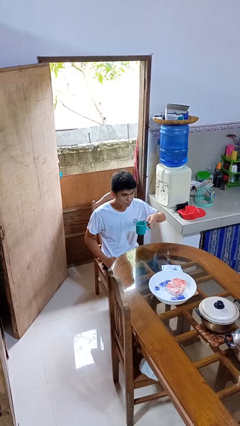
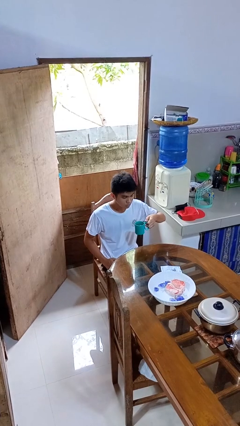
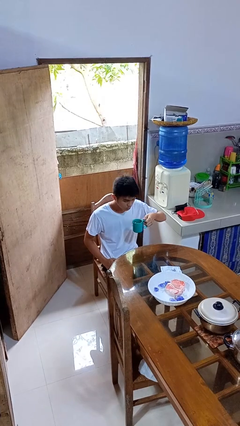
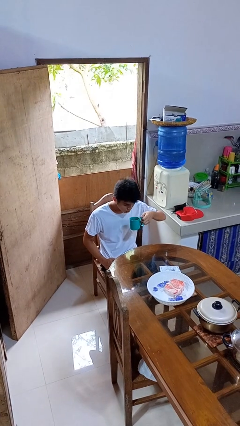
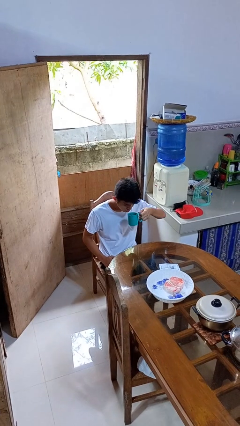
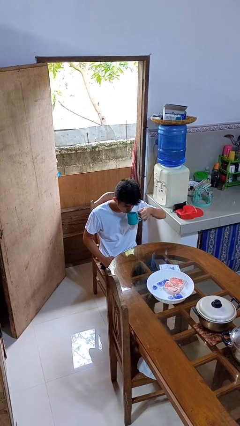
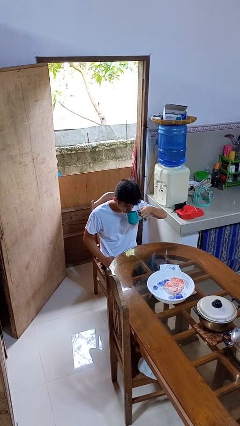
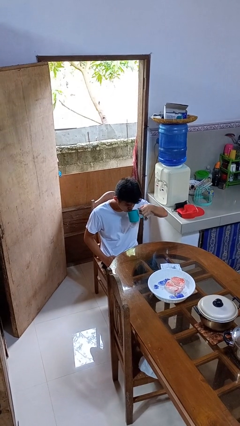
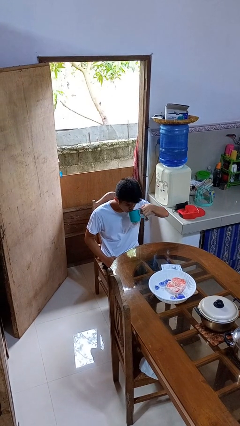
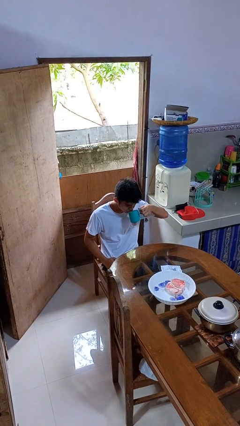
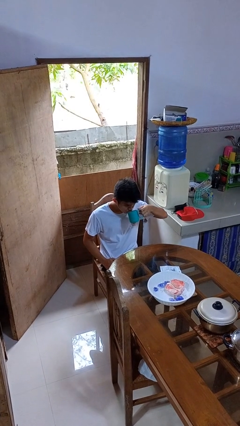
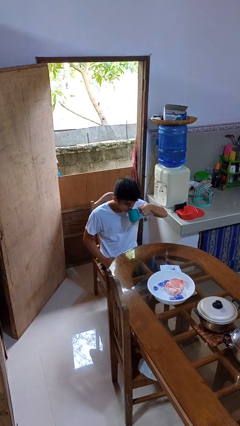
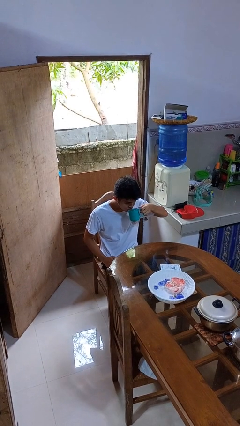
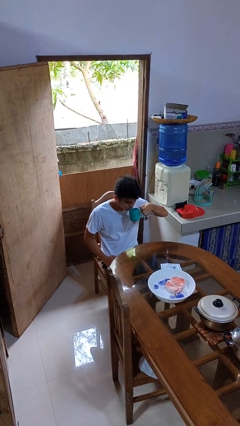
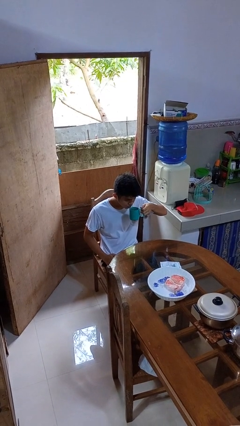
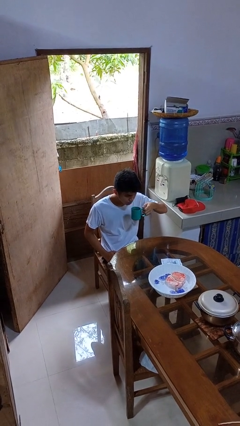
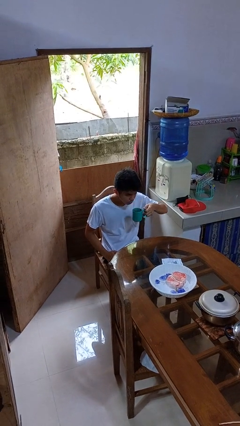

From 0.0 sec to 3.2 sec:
person drinks from mug

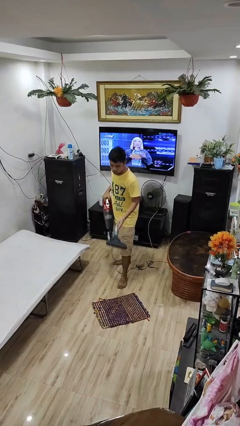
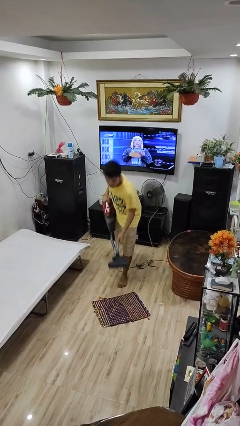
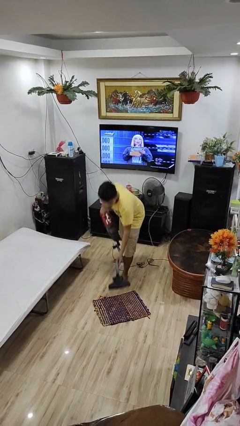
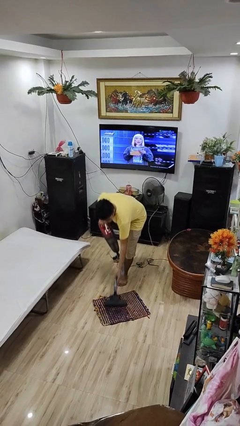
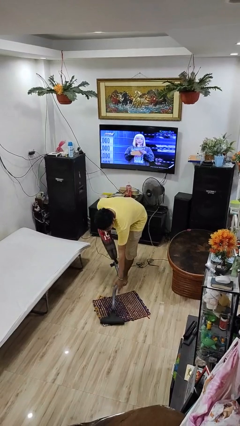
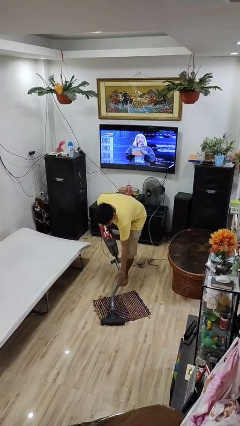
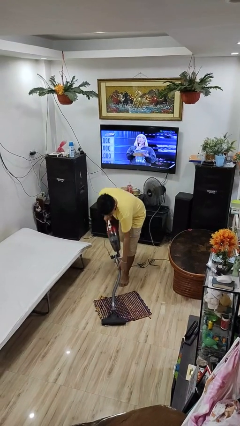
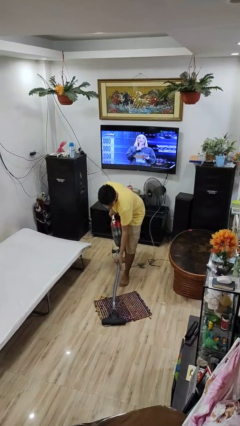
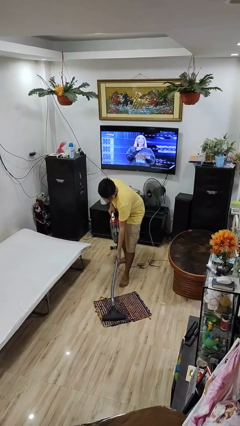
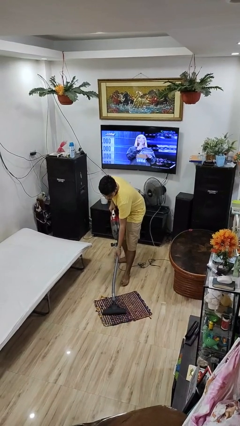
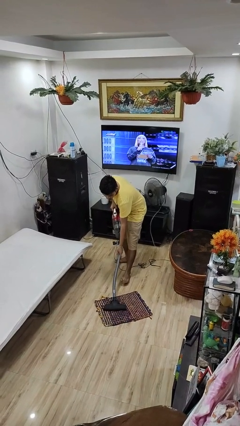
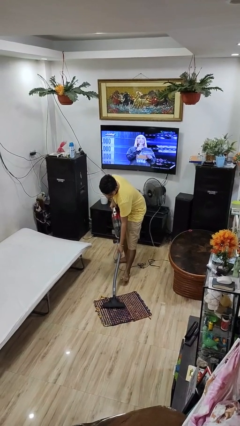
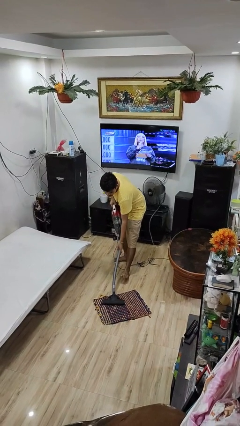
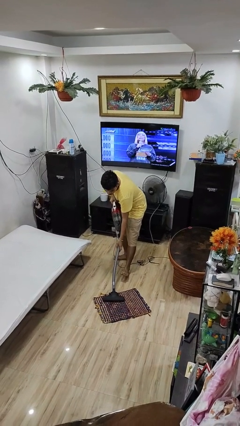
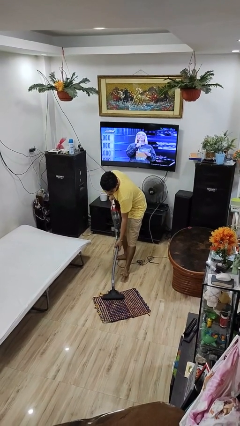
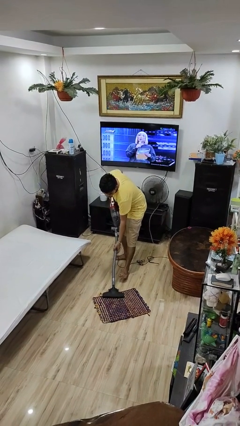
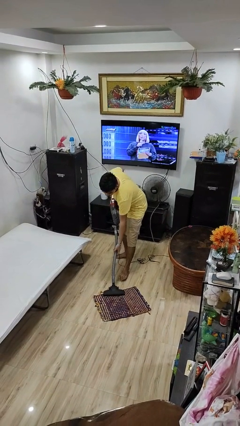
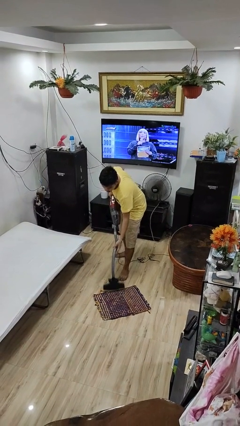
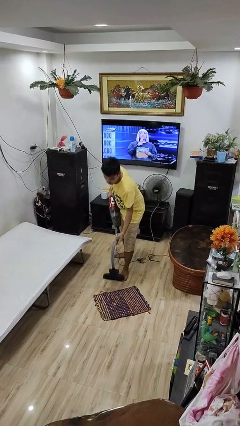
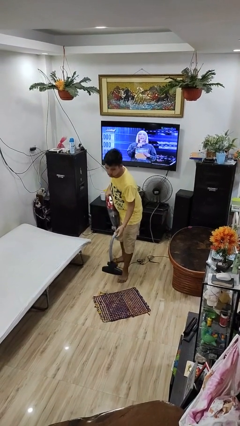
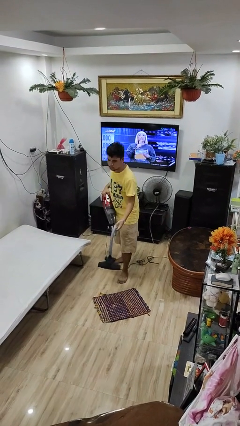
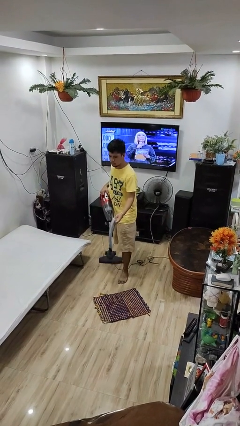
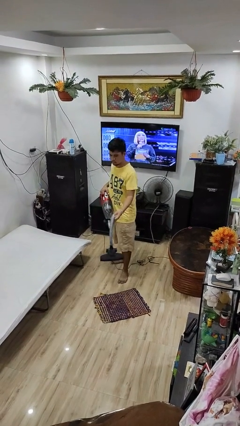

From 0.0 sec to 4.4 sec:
person vacuums carpet

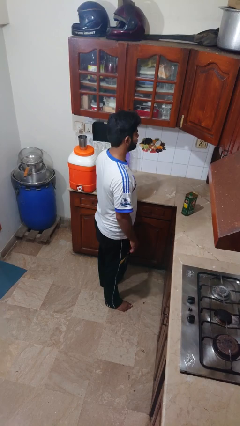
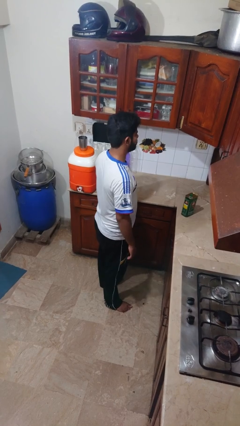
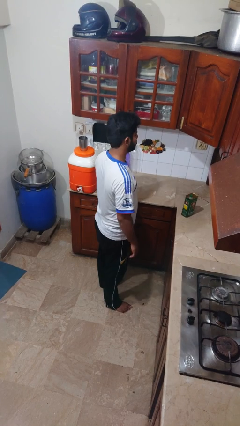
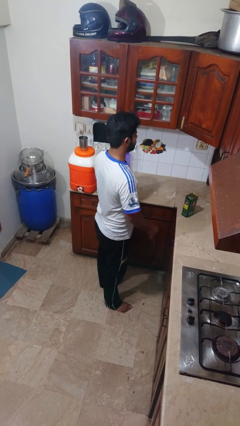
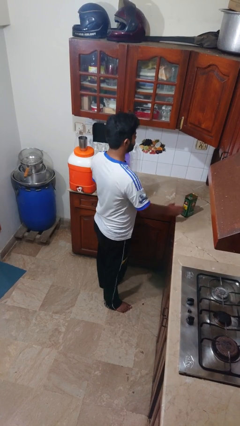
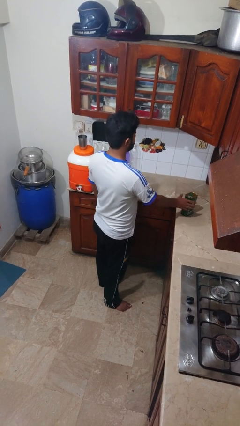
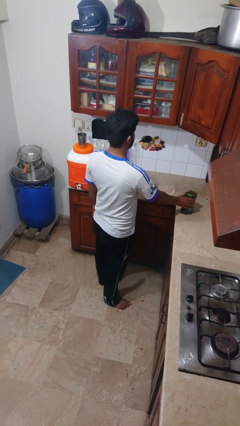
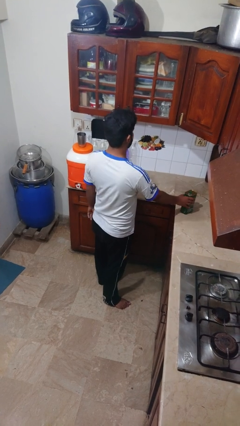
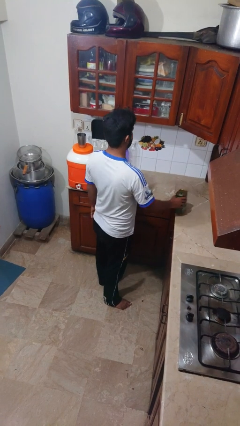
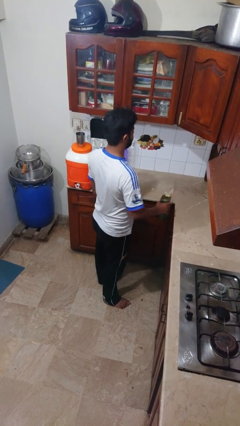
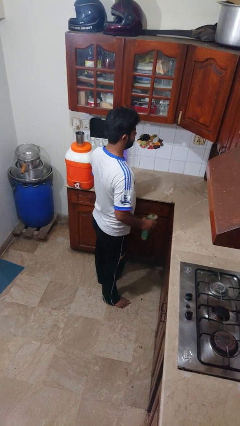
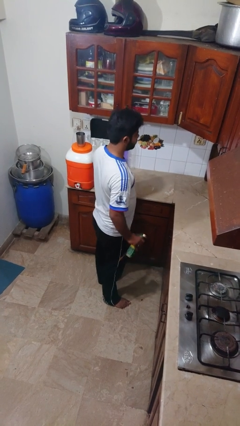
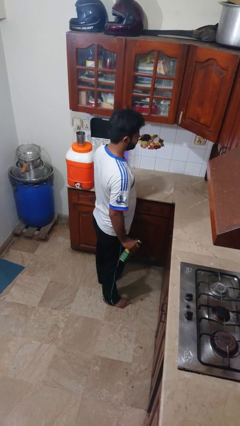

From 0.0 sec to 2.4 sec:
person picks up object from countertop

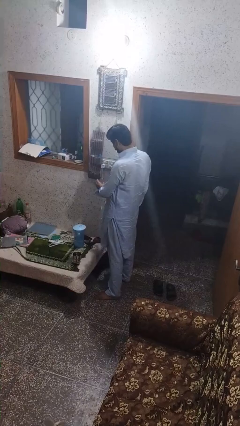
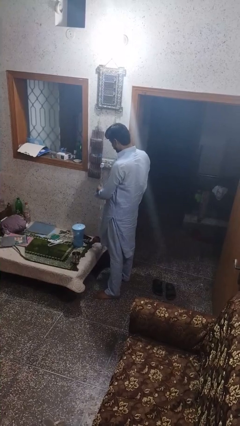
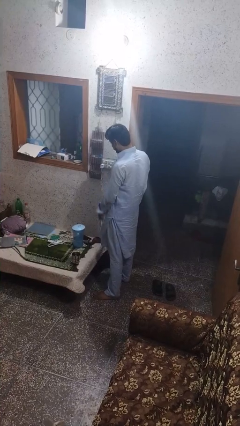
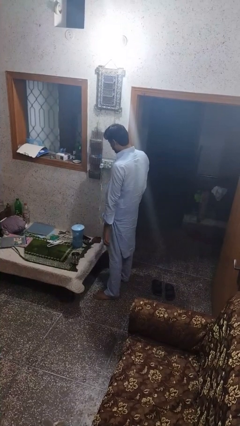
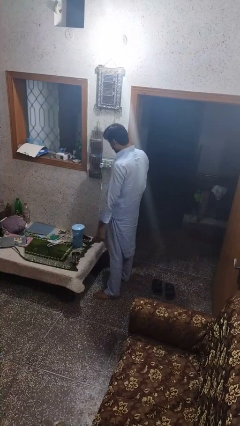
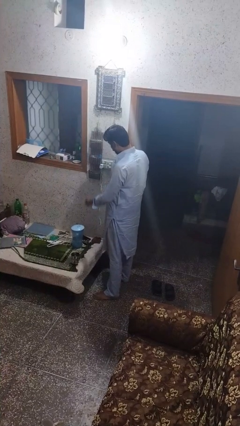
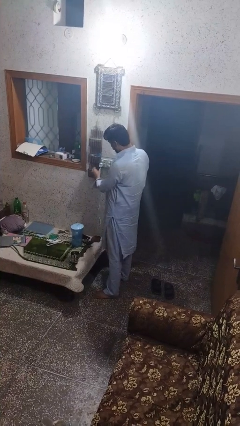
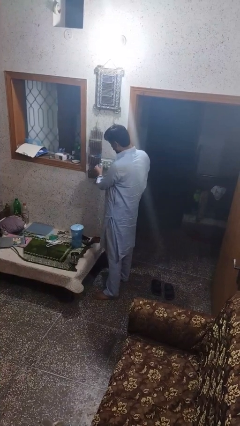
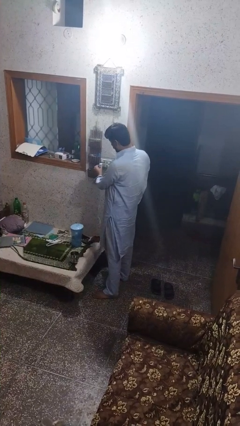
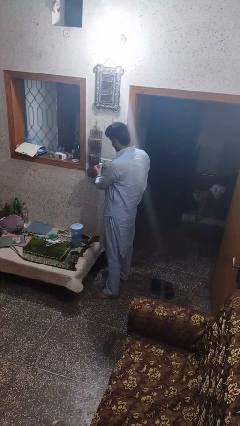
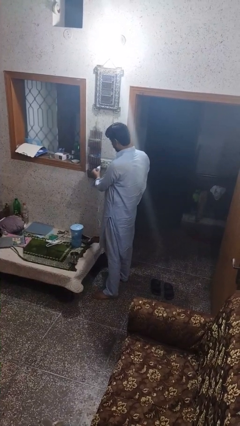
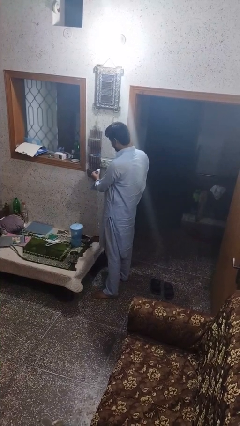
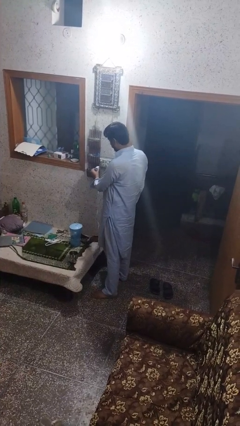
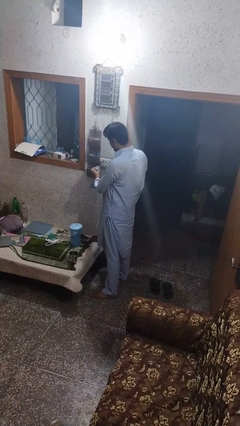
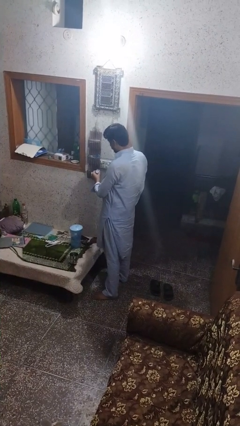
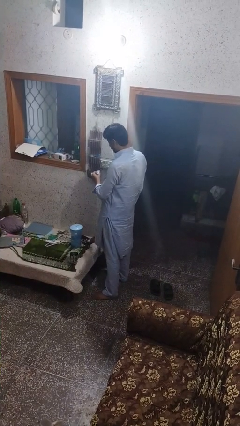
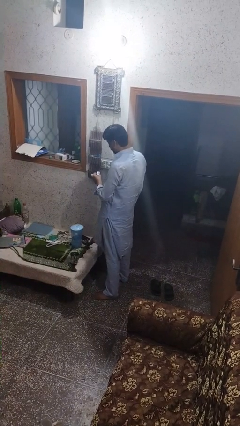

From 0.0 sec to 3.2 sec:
person unplugs from electrical socket

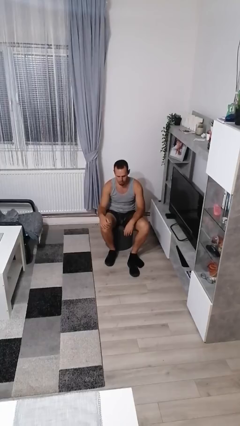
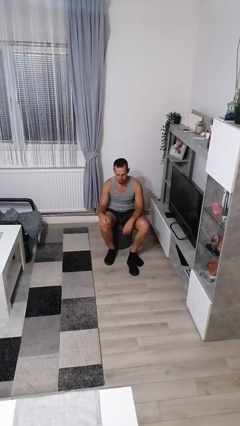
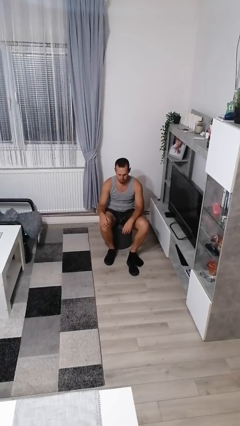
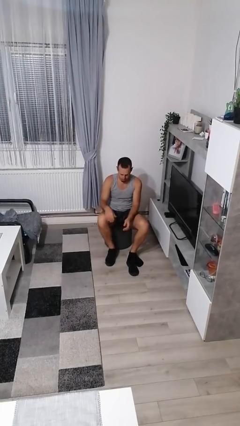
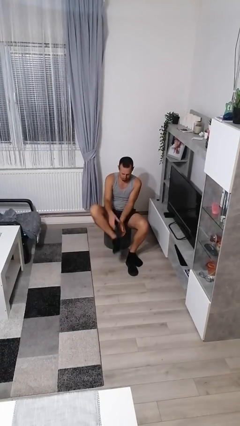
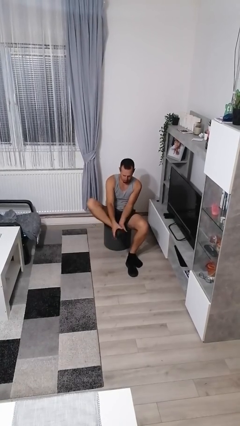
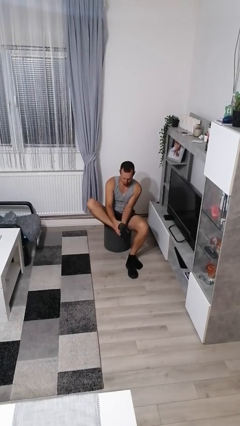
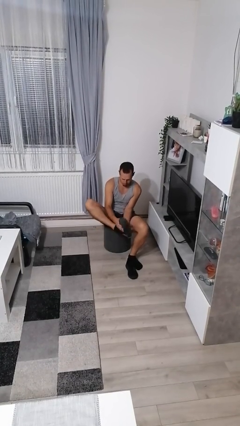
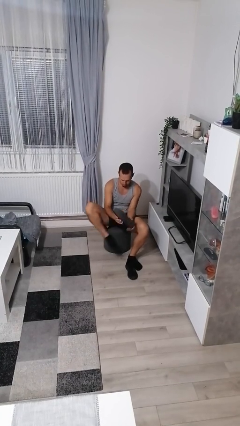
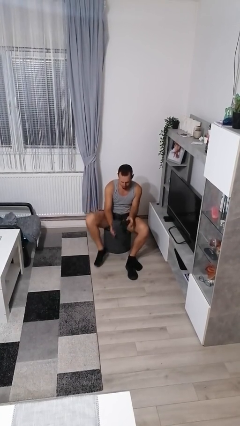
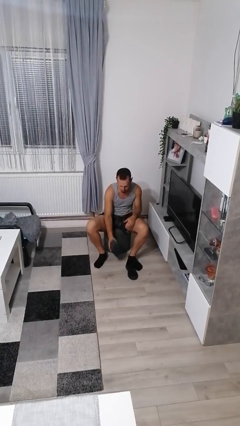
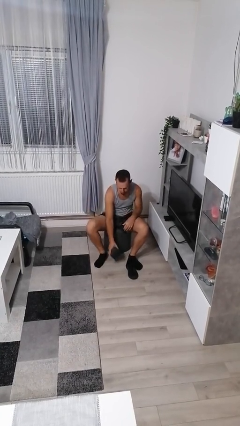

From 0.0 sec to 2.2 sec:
person takes off shoes

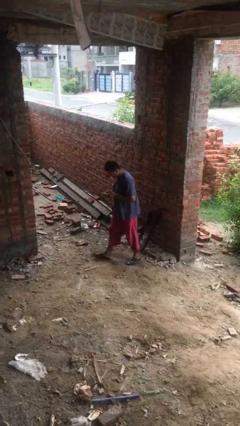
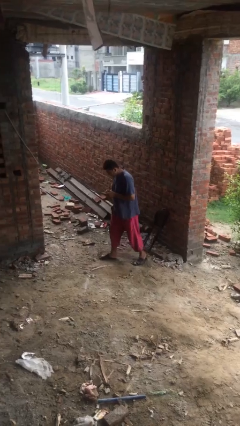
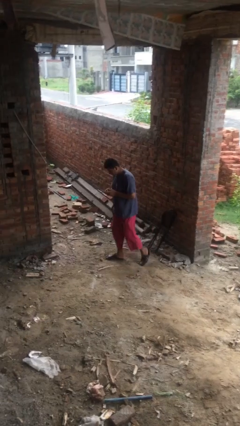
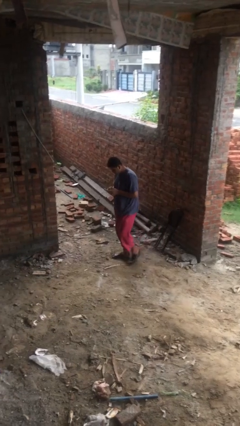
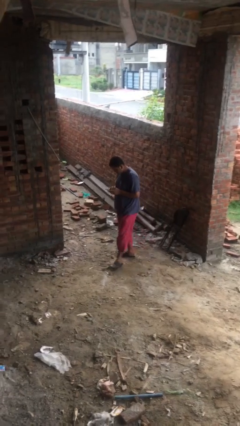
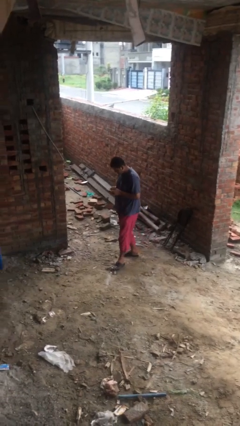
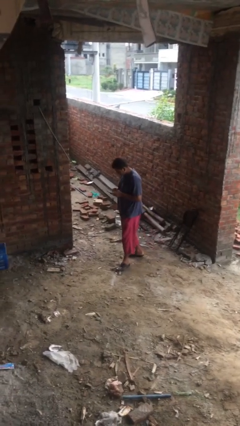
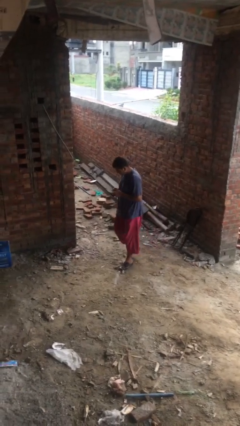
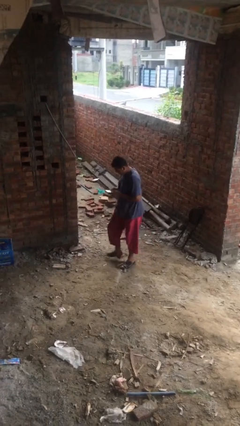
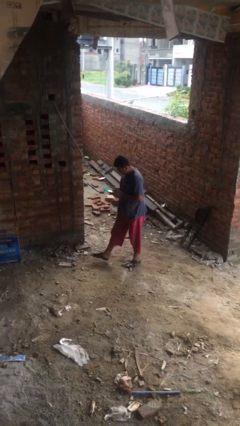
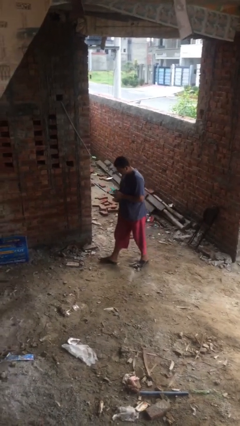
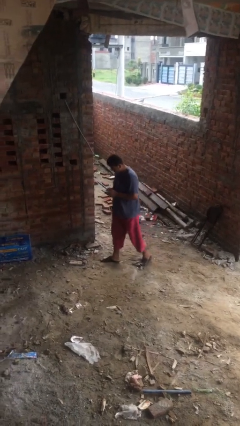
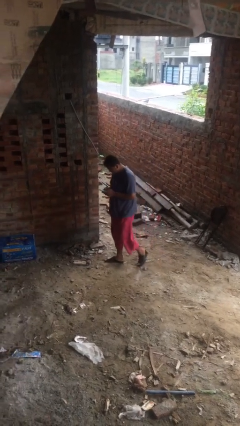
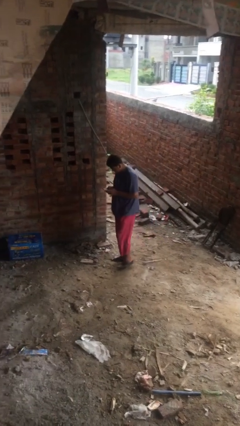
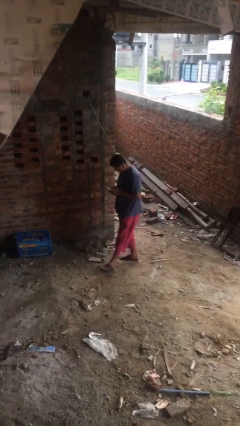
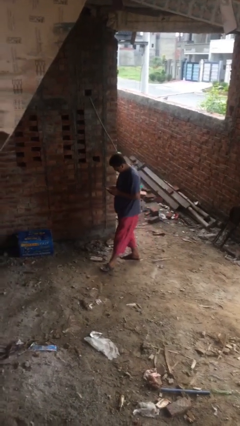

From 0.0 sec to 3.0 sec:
person texts on phone
